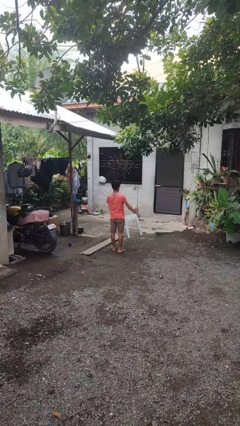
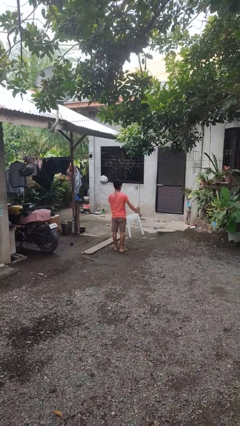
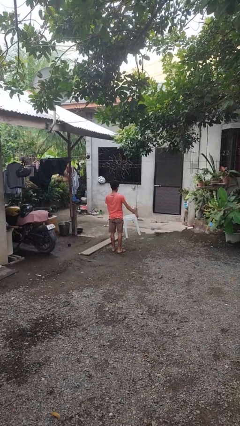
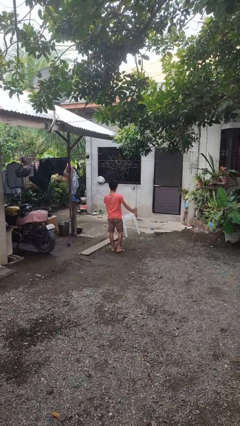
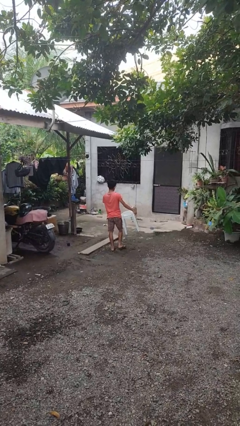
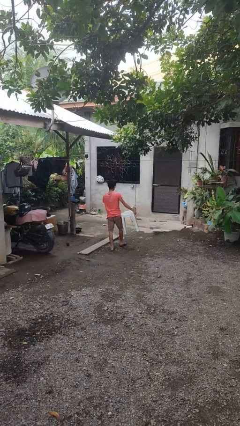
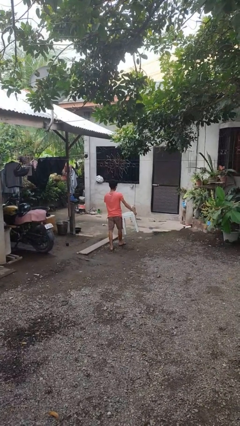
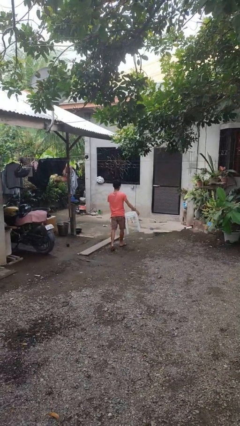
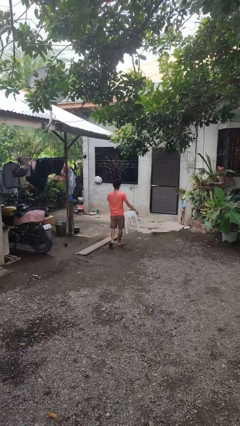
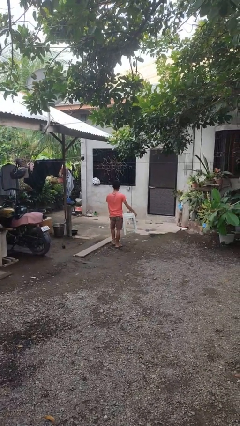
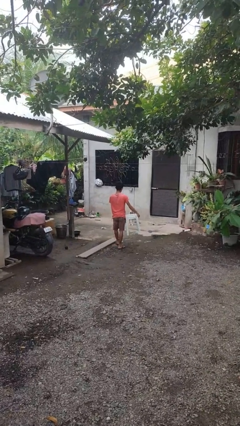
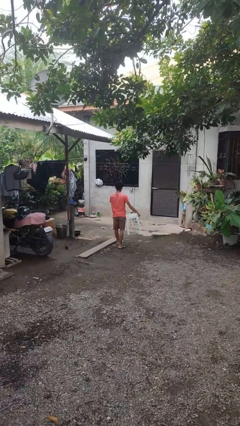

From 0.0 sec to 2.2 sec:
person carries furniture

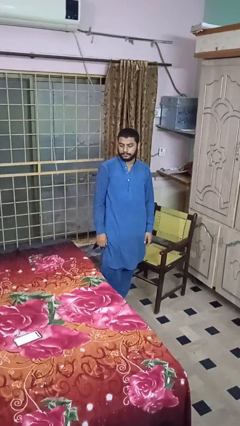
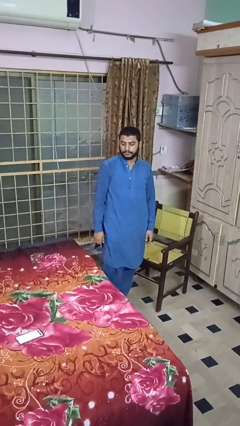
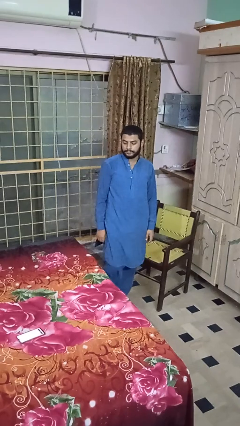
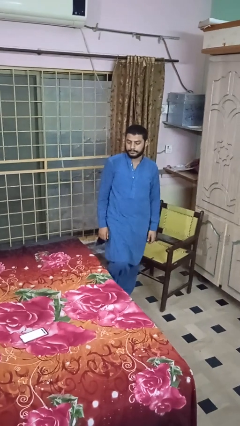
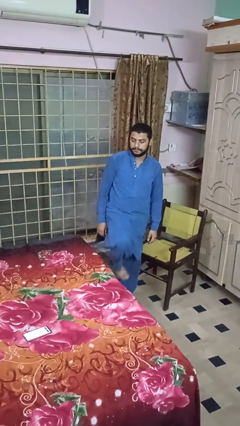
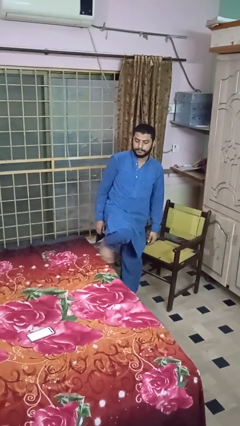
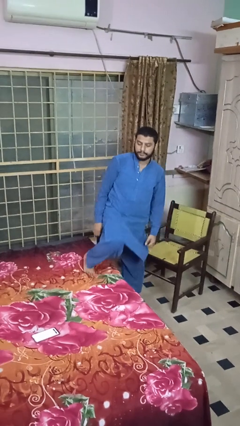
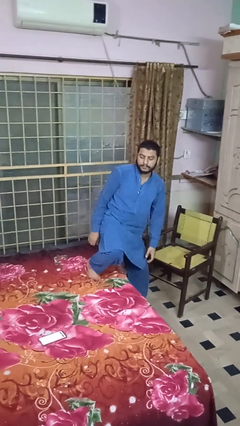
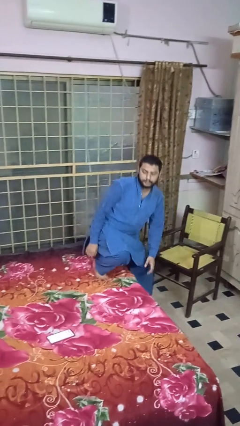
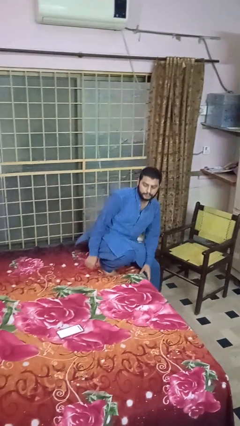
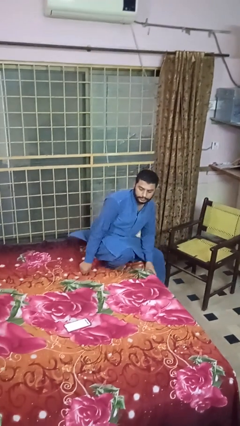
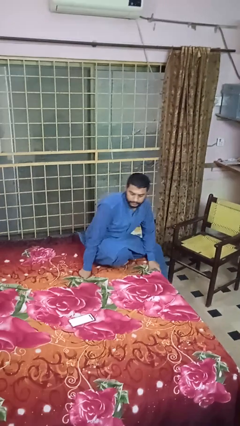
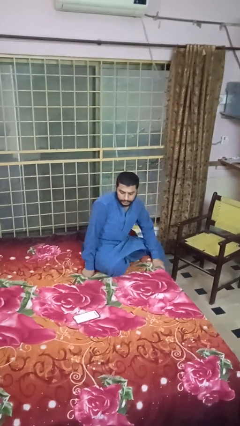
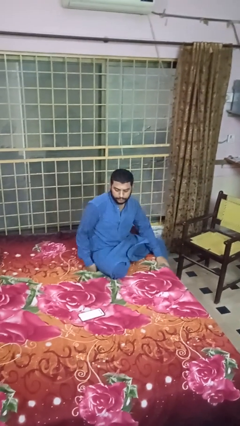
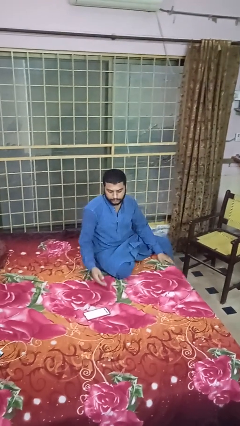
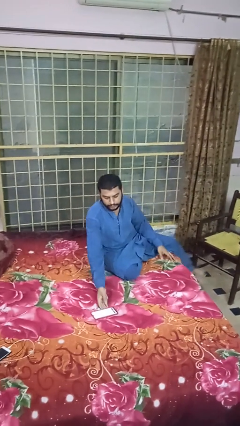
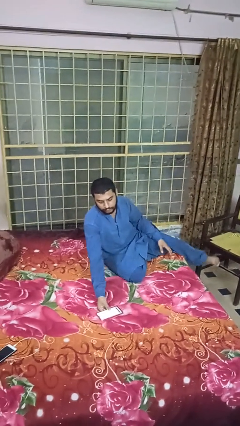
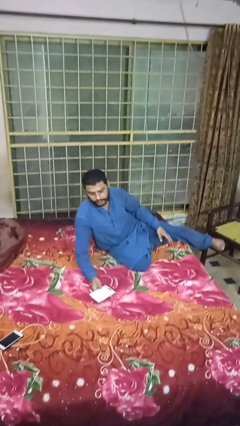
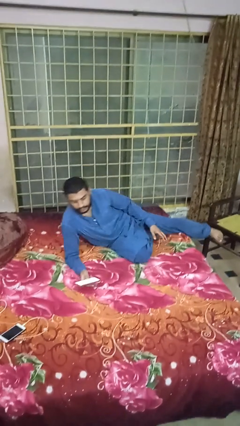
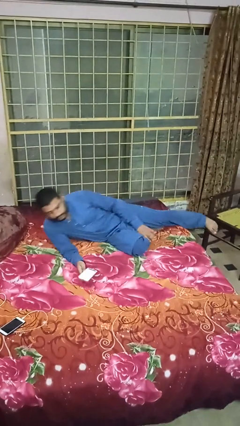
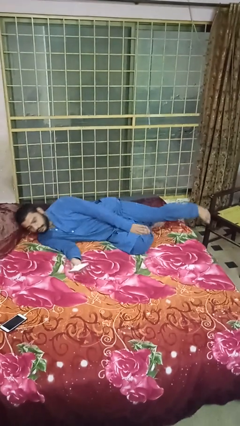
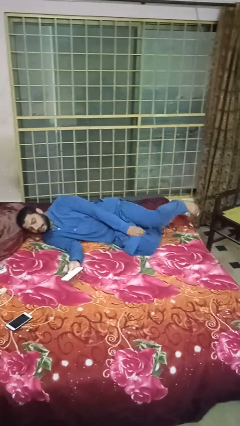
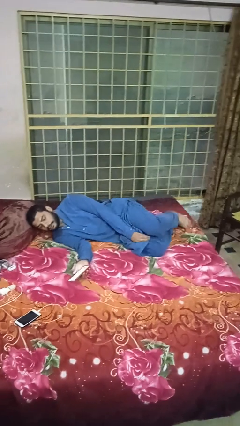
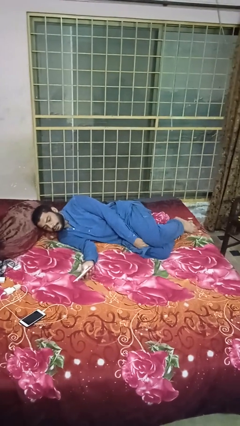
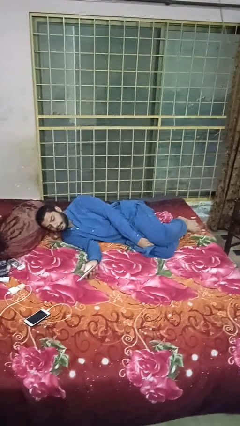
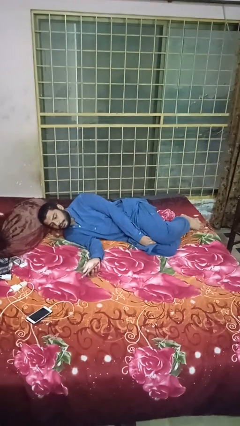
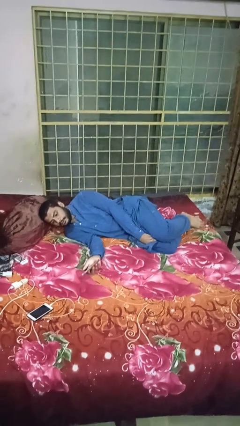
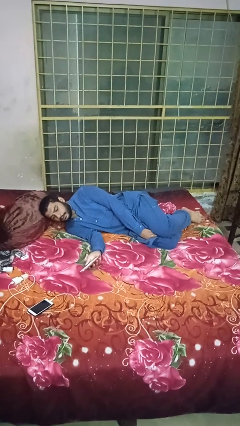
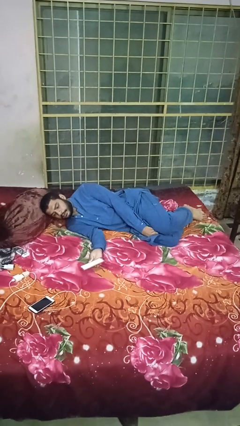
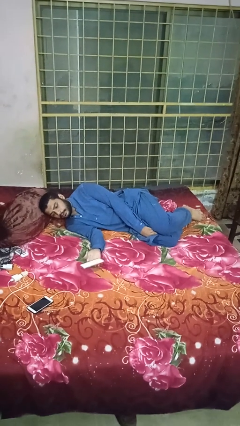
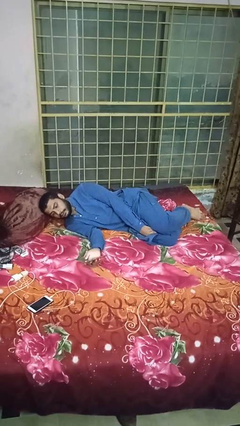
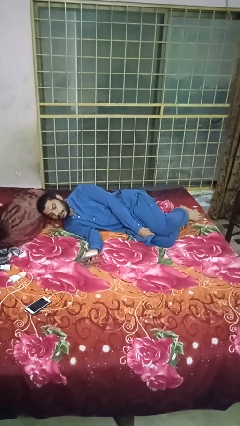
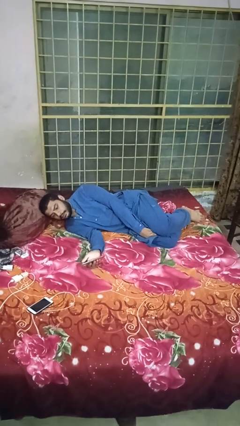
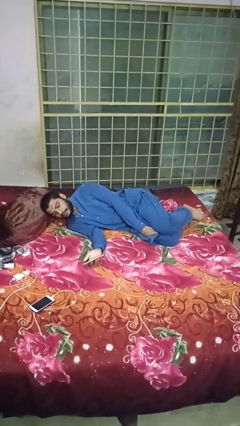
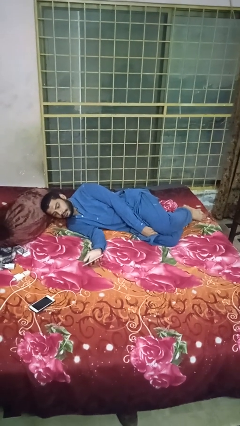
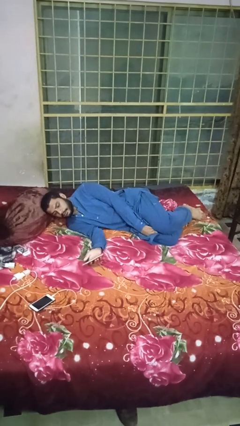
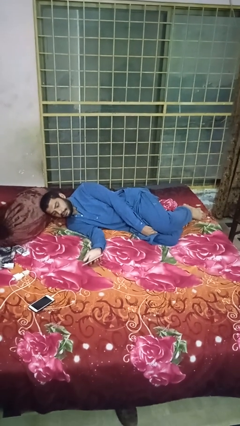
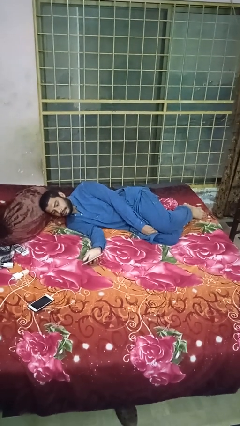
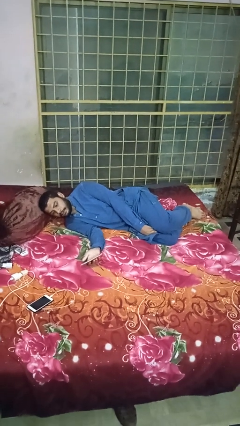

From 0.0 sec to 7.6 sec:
person lies down on bed

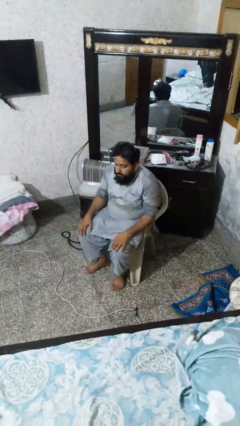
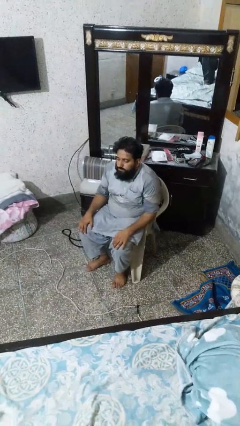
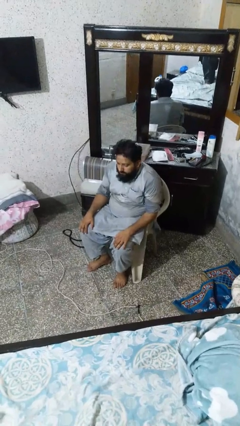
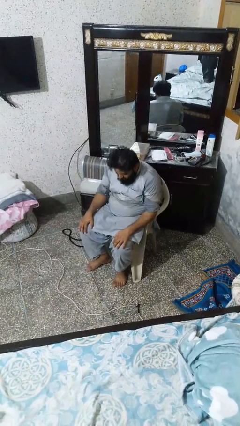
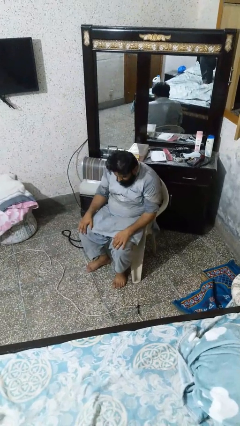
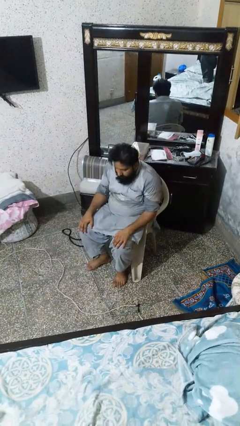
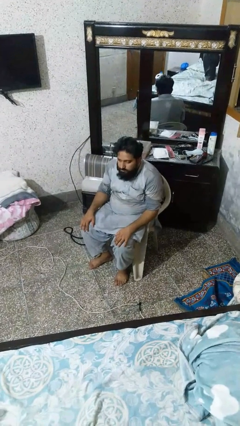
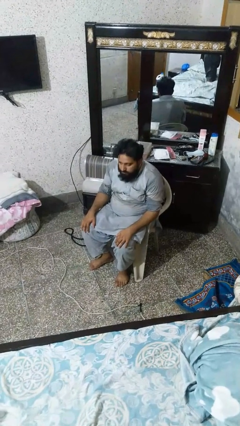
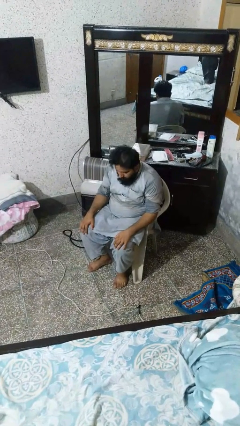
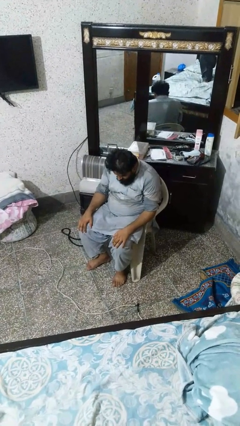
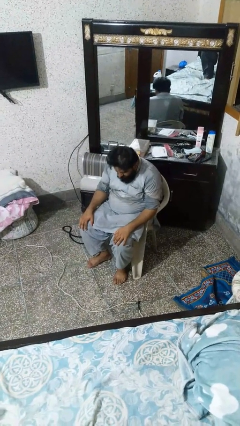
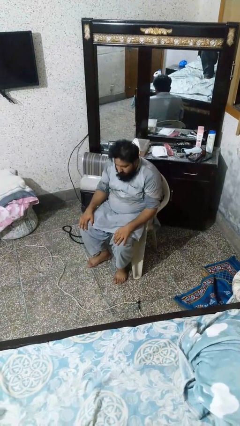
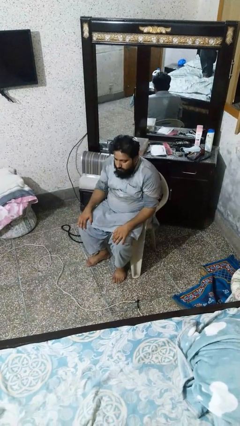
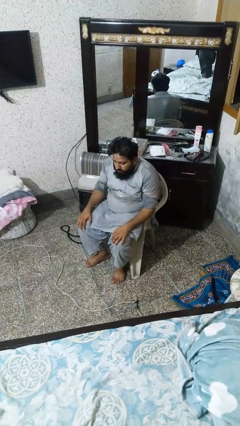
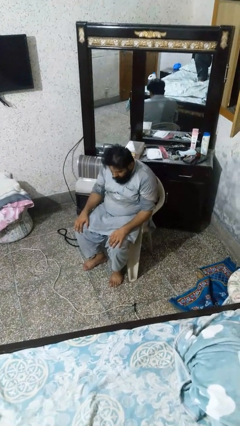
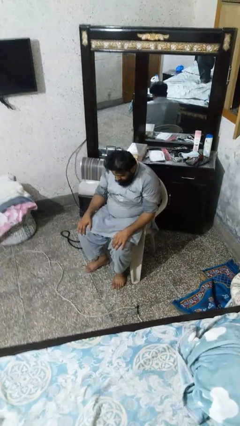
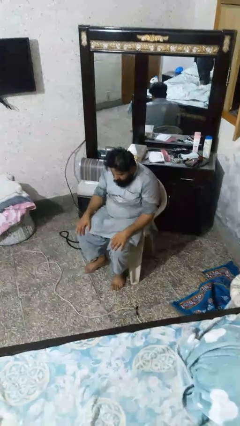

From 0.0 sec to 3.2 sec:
person nods head

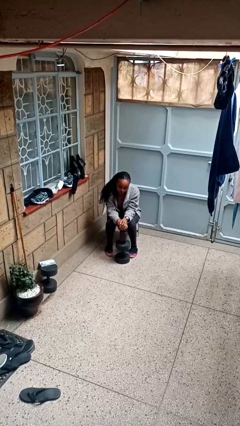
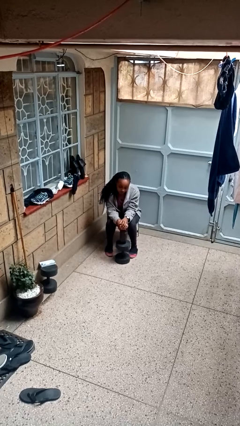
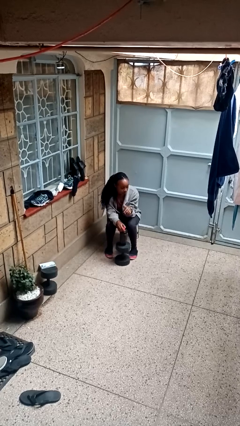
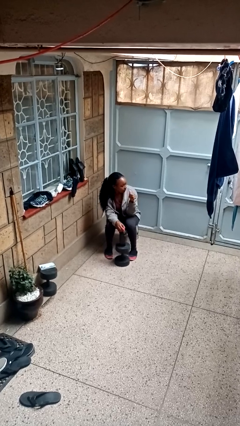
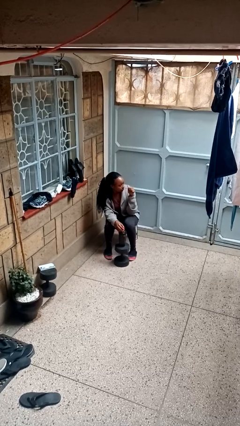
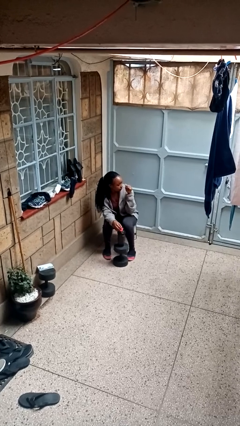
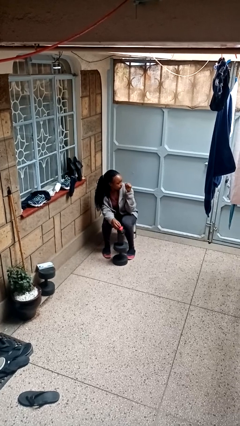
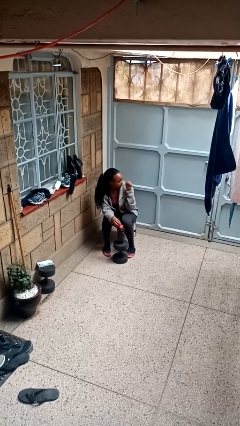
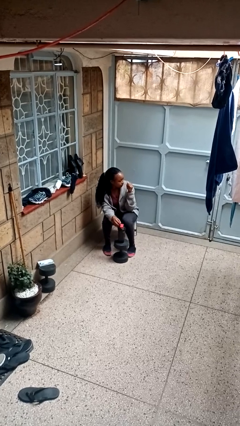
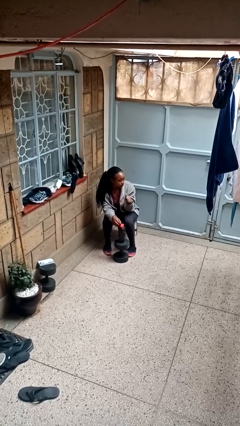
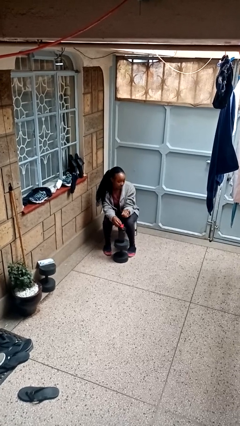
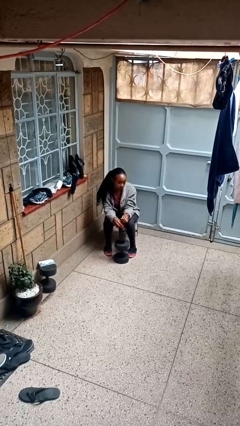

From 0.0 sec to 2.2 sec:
person gestures behind me

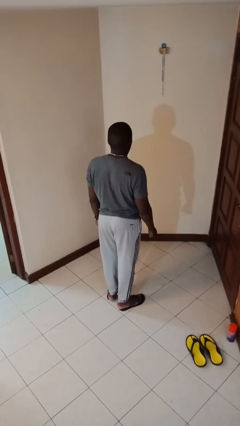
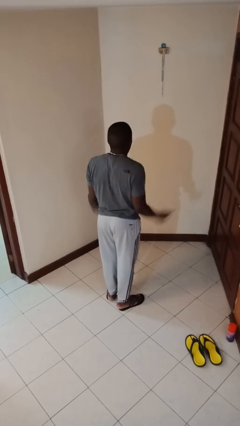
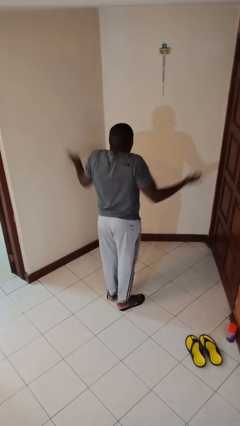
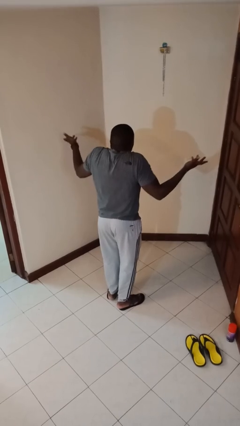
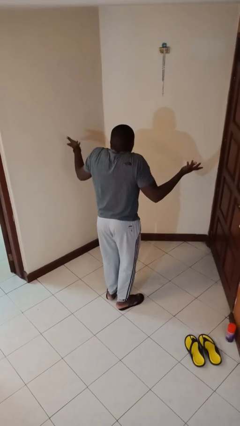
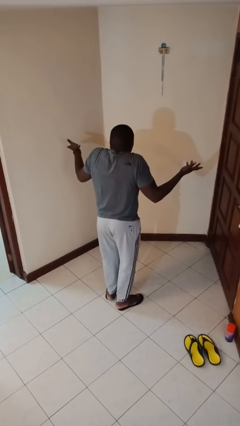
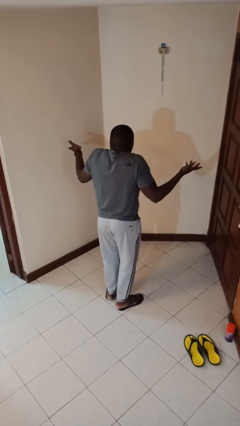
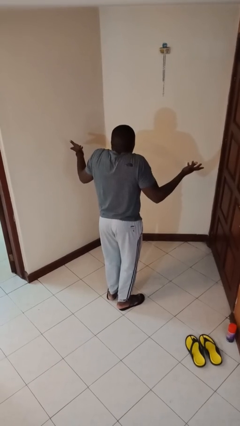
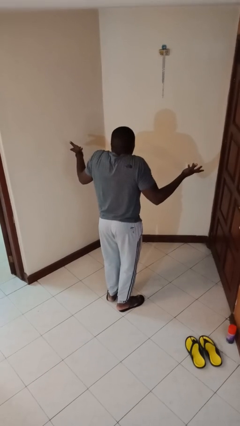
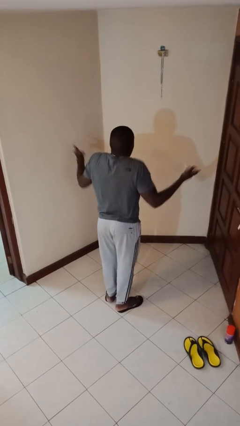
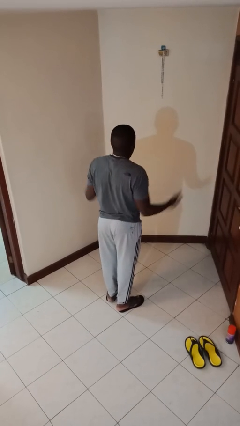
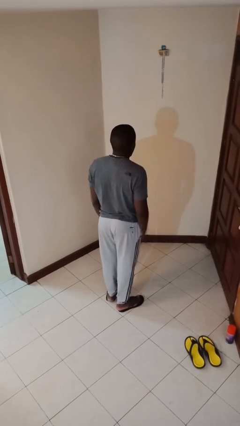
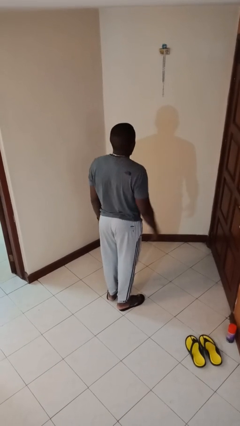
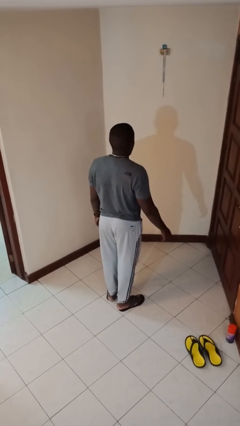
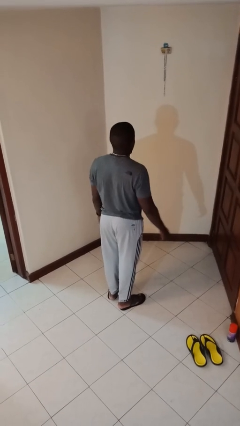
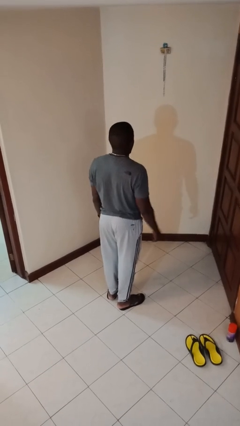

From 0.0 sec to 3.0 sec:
person shrugs
